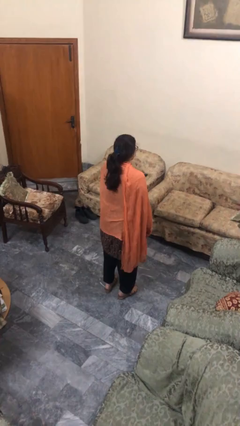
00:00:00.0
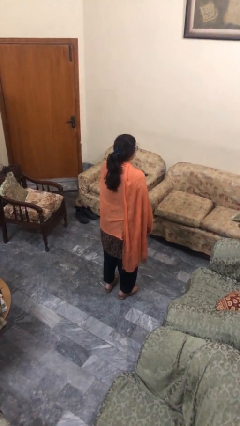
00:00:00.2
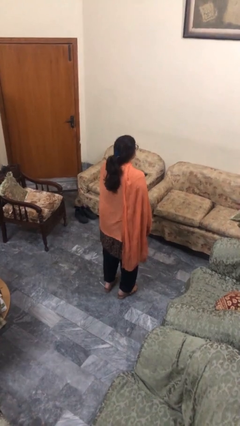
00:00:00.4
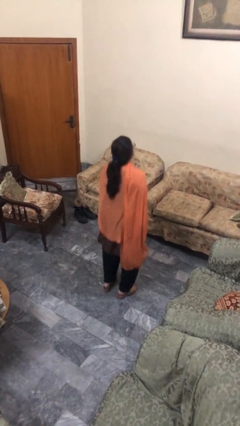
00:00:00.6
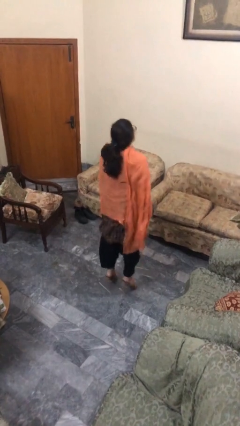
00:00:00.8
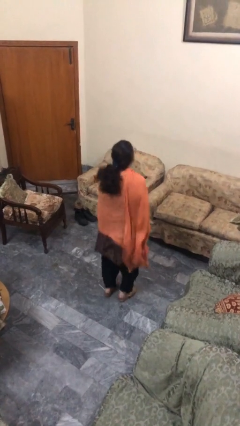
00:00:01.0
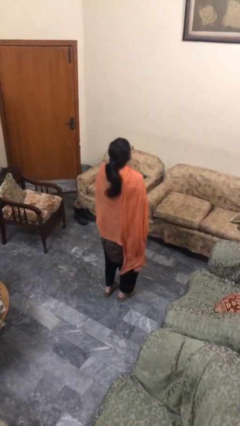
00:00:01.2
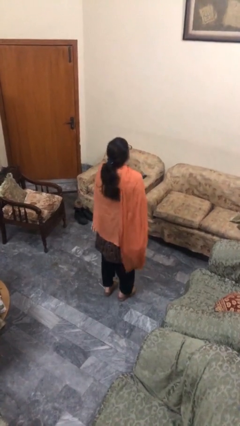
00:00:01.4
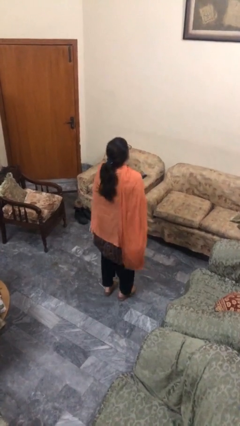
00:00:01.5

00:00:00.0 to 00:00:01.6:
person jumps

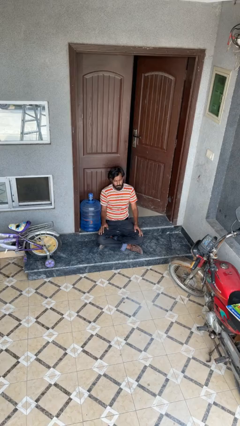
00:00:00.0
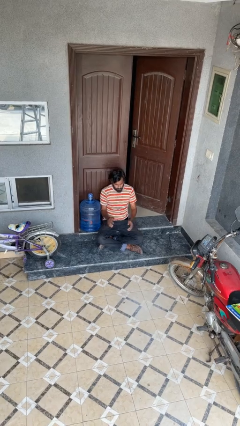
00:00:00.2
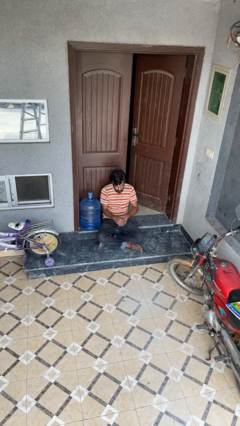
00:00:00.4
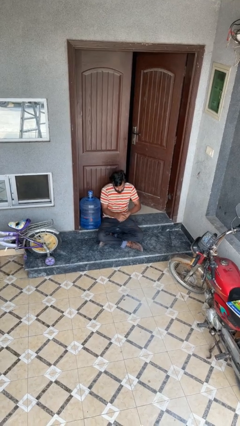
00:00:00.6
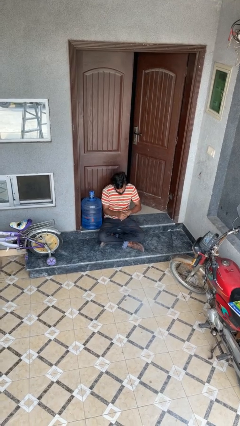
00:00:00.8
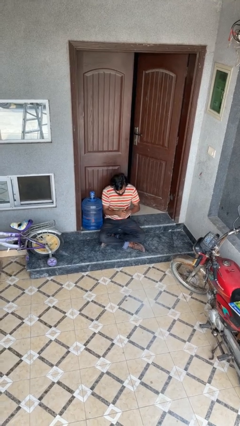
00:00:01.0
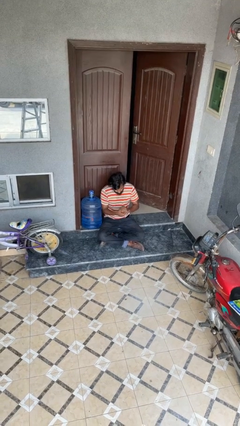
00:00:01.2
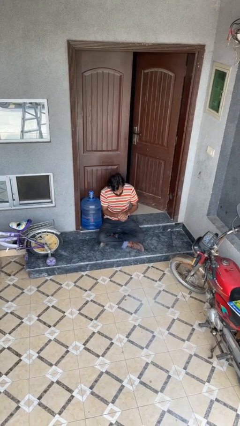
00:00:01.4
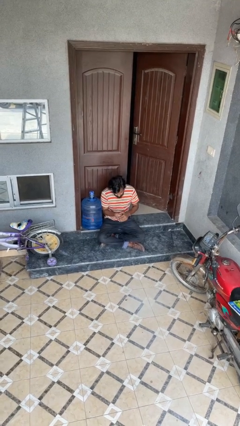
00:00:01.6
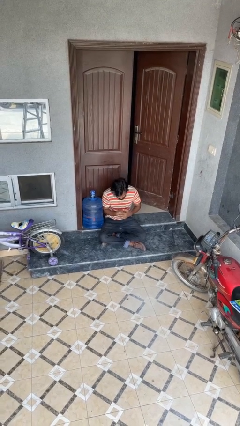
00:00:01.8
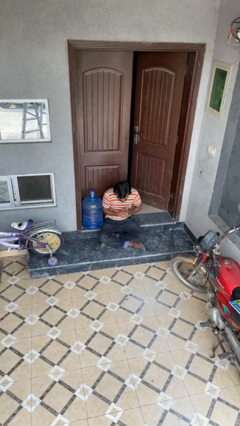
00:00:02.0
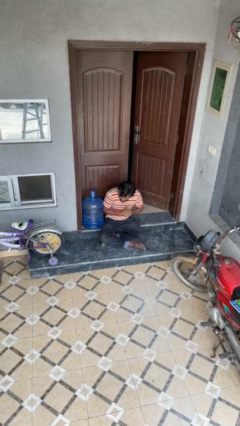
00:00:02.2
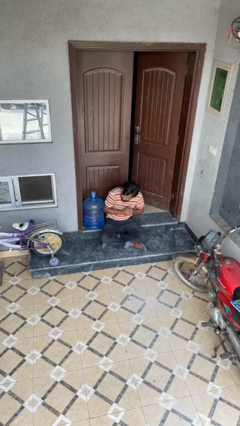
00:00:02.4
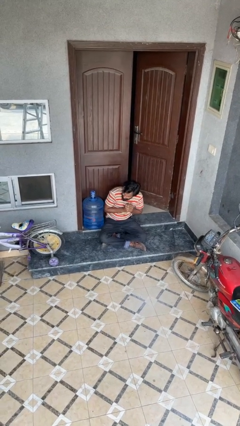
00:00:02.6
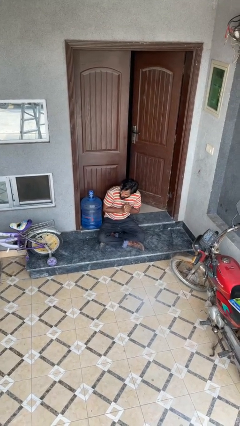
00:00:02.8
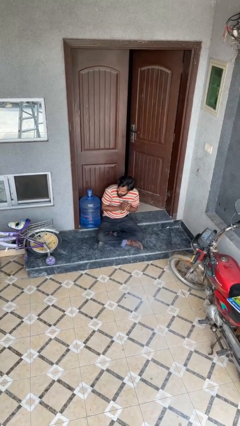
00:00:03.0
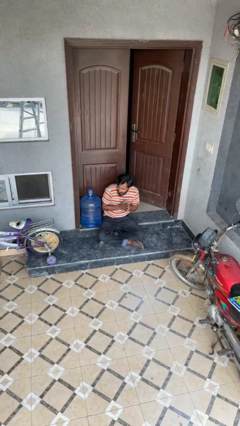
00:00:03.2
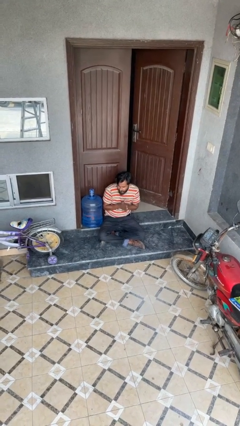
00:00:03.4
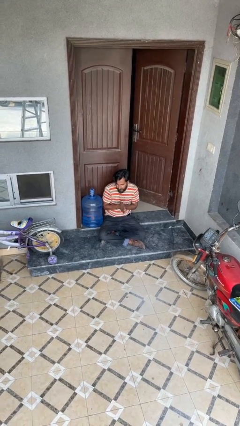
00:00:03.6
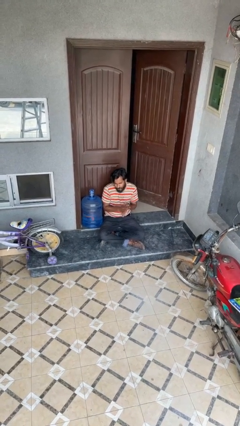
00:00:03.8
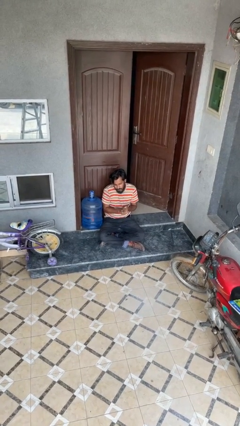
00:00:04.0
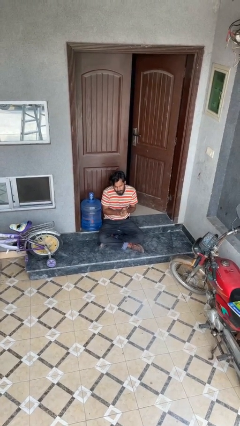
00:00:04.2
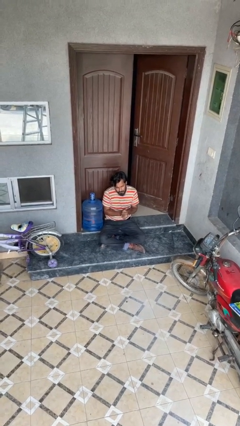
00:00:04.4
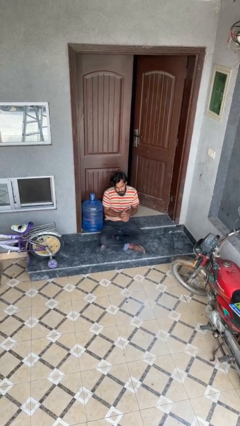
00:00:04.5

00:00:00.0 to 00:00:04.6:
person looks at hands in lap

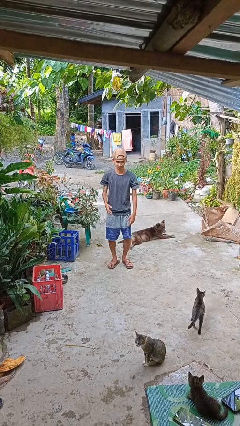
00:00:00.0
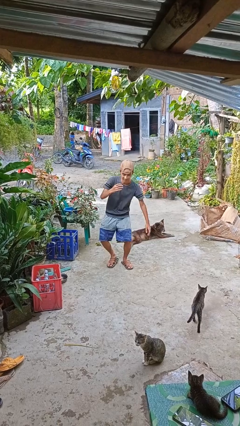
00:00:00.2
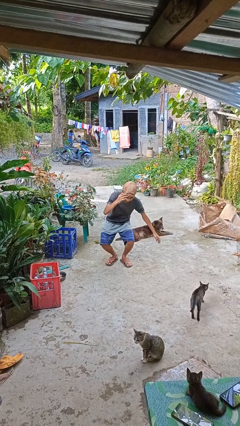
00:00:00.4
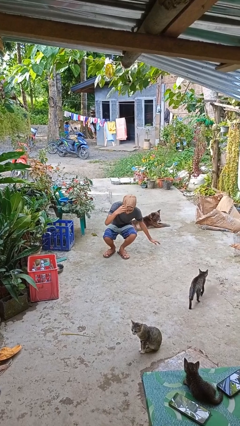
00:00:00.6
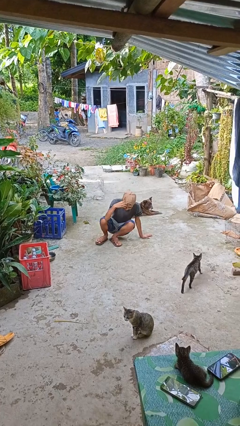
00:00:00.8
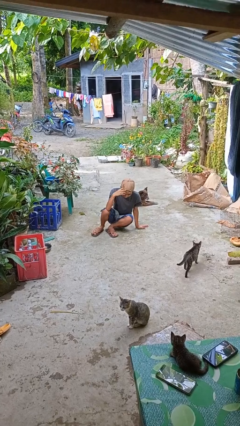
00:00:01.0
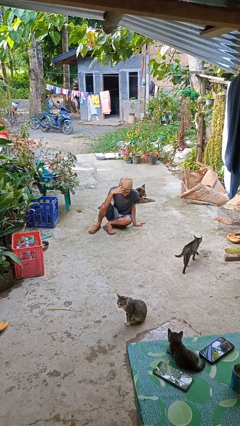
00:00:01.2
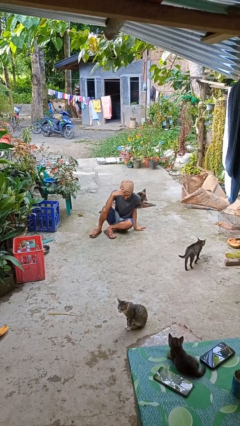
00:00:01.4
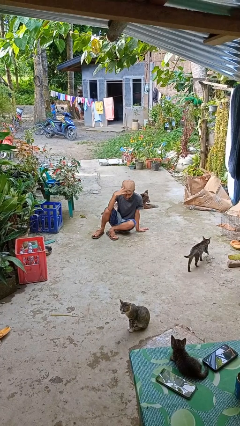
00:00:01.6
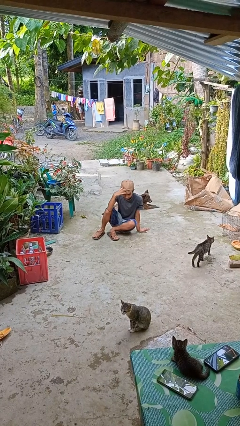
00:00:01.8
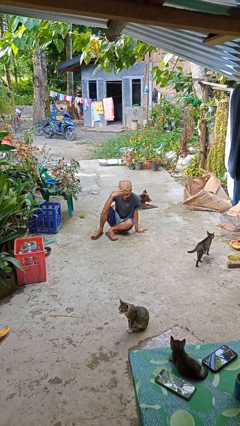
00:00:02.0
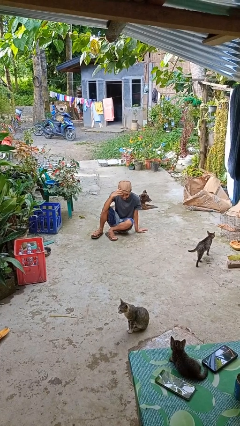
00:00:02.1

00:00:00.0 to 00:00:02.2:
person falls while standing

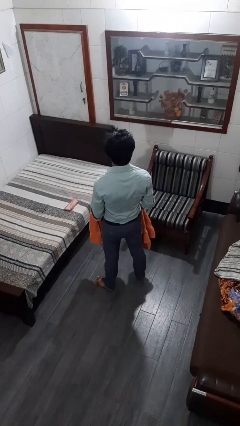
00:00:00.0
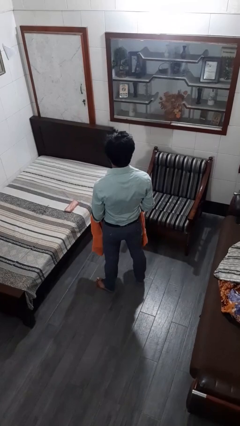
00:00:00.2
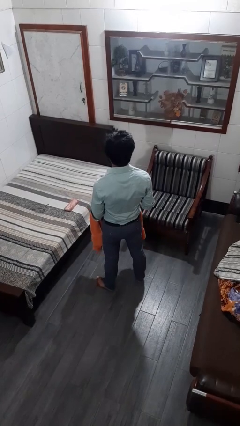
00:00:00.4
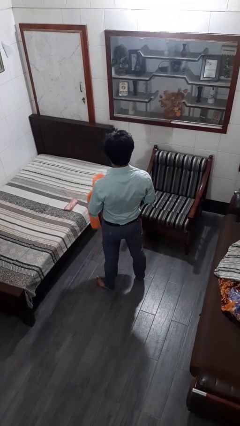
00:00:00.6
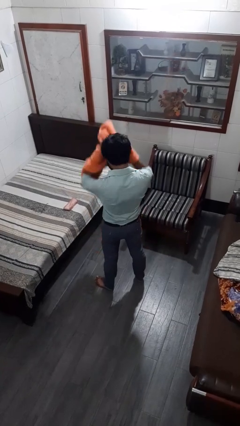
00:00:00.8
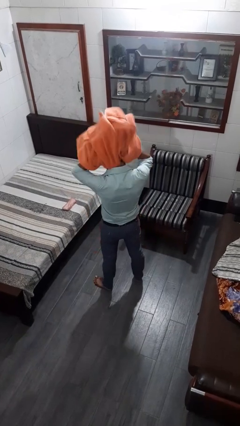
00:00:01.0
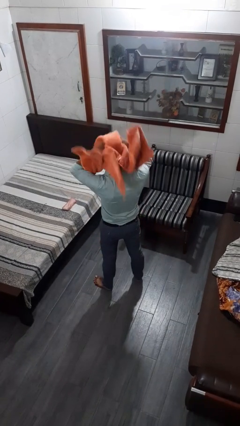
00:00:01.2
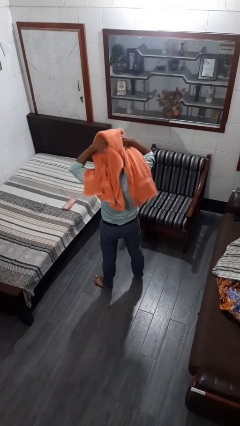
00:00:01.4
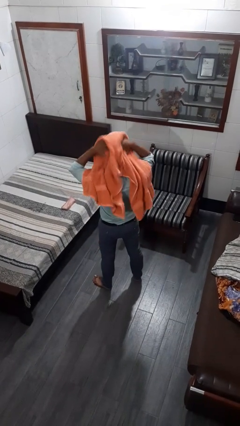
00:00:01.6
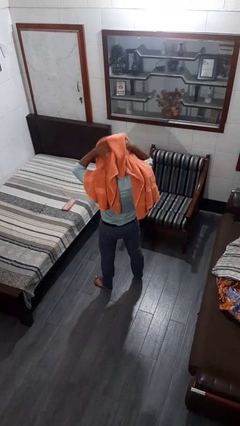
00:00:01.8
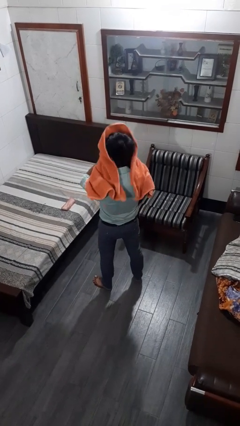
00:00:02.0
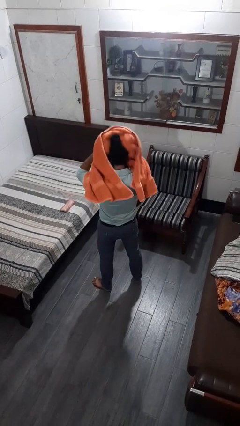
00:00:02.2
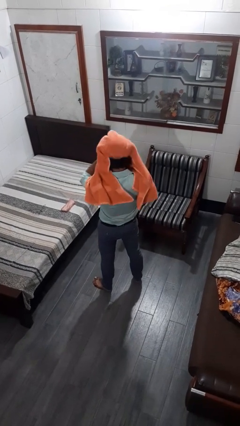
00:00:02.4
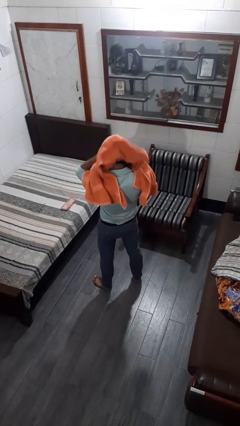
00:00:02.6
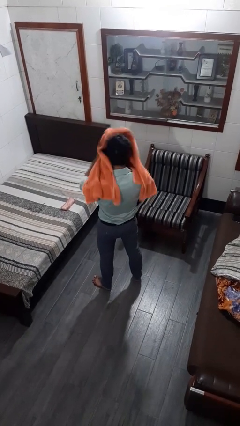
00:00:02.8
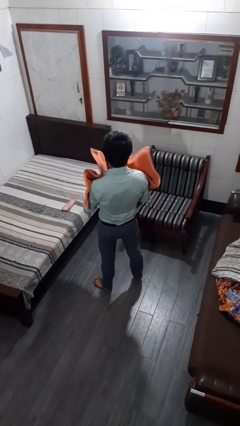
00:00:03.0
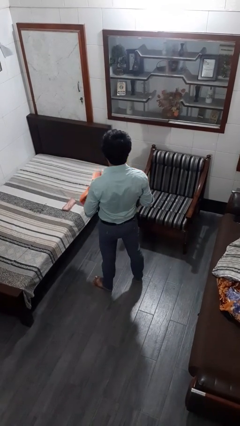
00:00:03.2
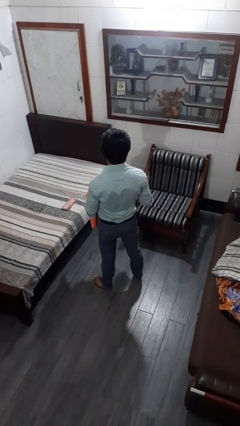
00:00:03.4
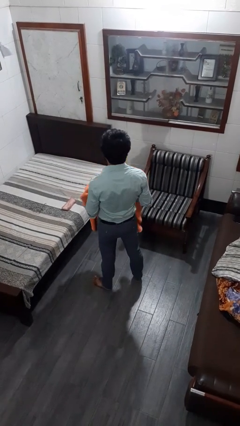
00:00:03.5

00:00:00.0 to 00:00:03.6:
person dries hair with towel

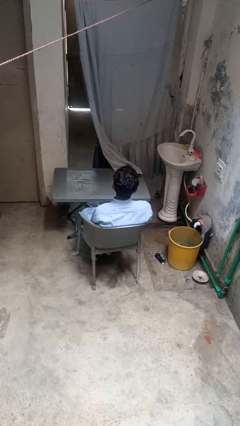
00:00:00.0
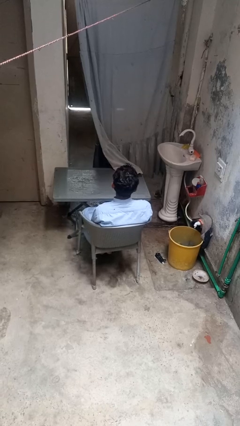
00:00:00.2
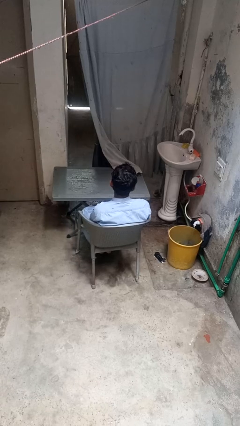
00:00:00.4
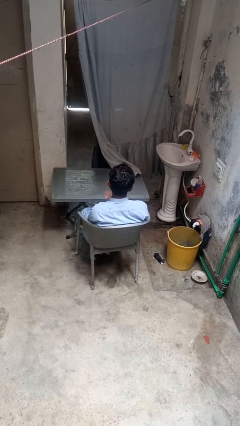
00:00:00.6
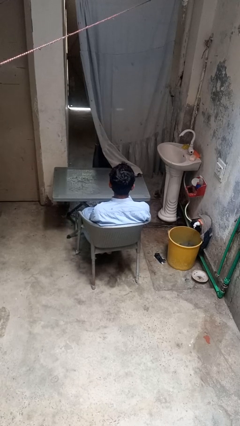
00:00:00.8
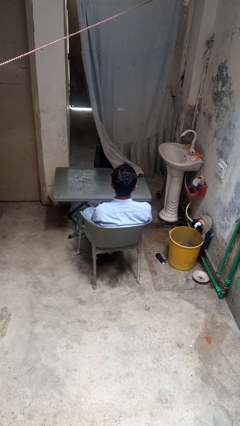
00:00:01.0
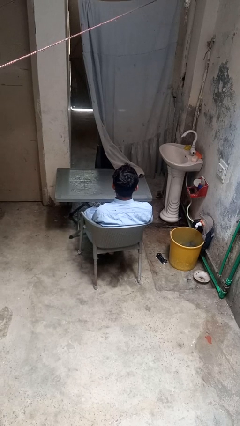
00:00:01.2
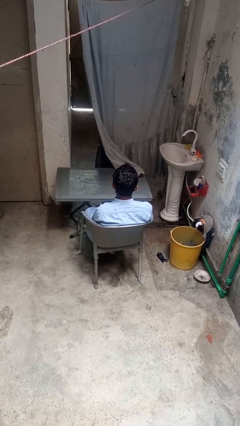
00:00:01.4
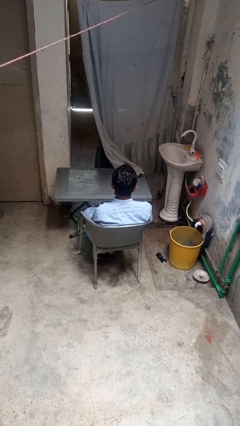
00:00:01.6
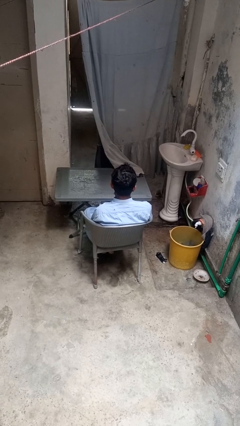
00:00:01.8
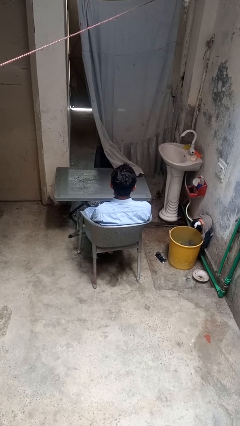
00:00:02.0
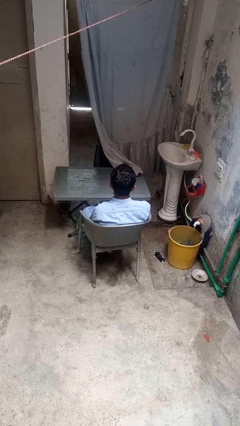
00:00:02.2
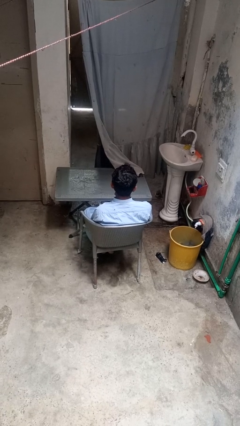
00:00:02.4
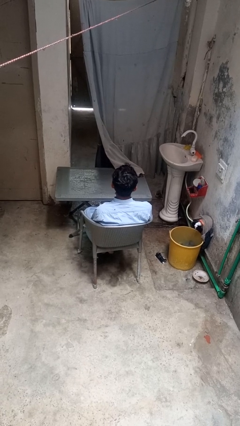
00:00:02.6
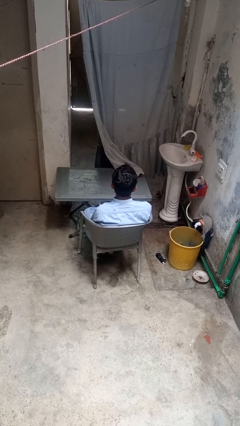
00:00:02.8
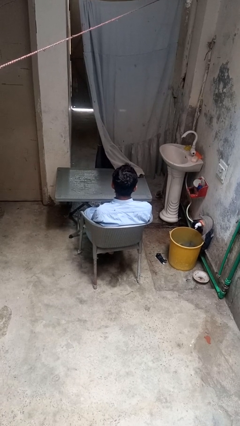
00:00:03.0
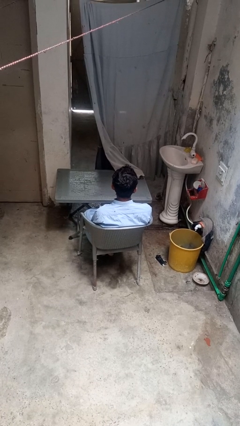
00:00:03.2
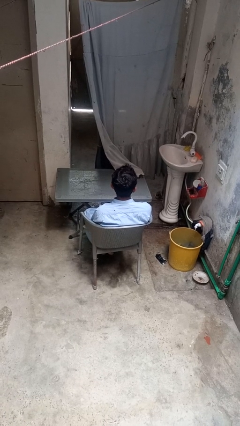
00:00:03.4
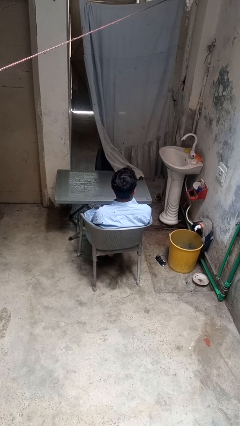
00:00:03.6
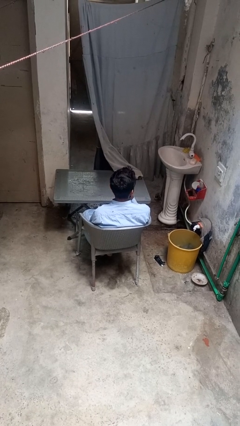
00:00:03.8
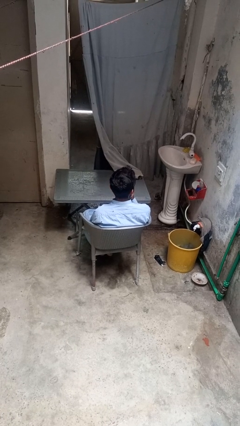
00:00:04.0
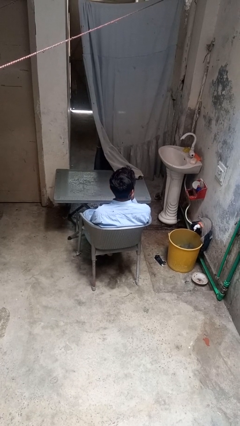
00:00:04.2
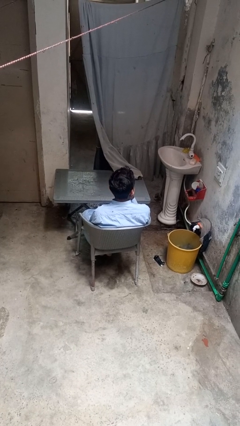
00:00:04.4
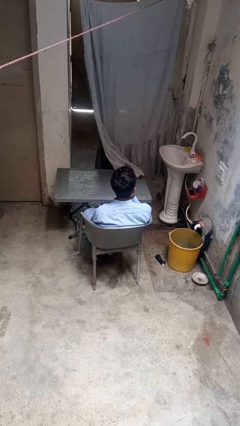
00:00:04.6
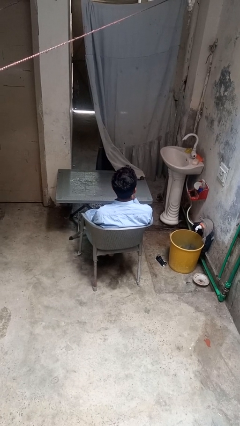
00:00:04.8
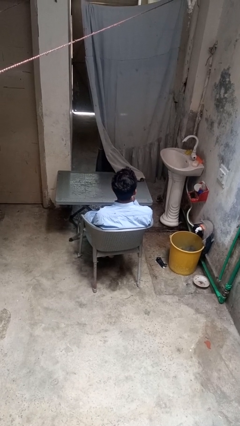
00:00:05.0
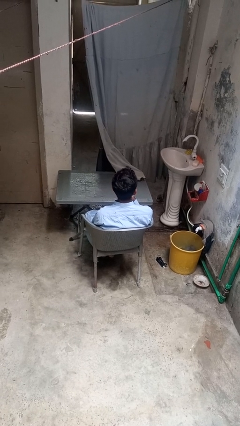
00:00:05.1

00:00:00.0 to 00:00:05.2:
person licks fingers

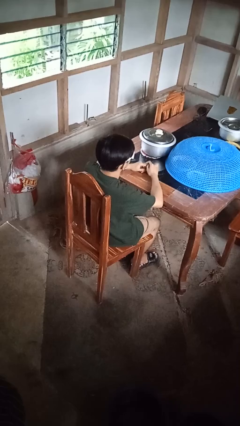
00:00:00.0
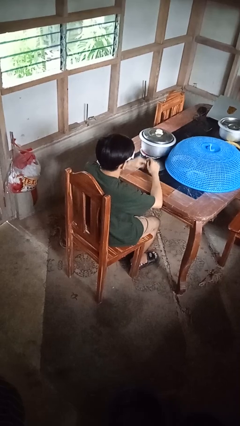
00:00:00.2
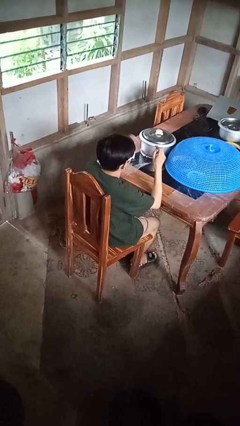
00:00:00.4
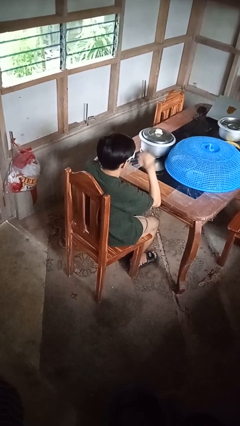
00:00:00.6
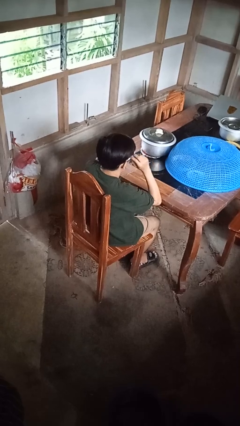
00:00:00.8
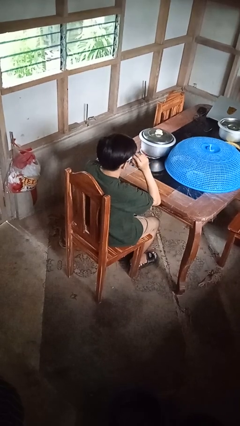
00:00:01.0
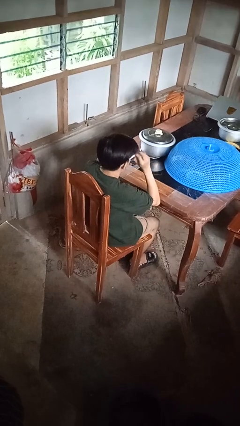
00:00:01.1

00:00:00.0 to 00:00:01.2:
person takes off sunglasses
